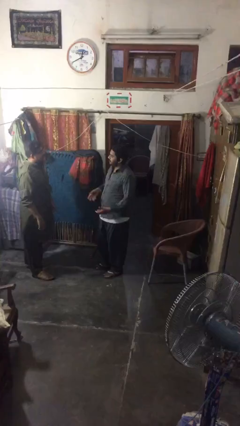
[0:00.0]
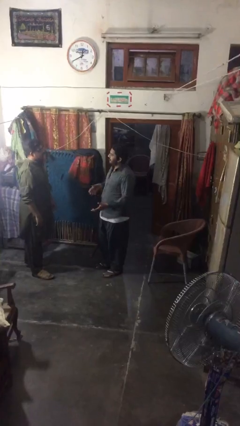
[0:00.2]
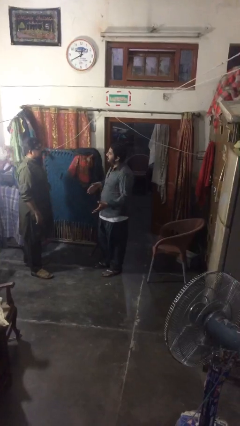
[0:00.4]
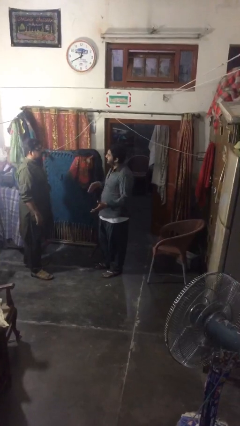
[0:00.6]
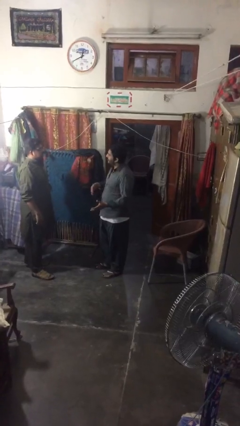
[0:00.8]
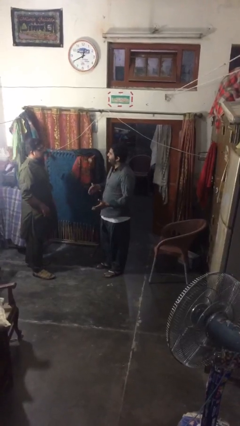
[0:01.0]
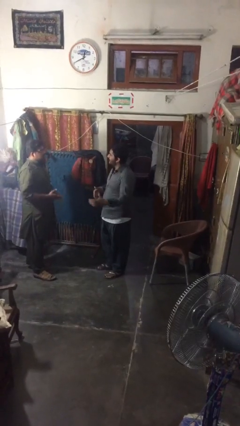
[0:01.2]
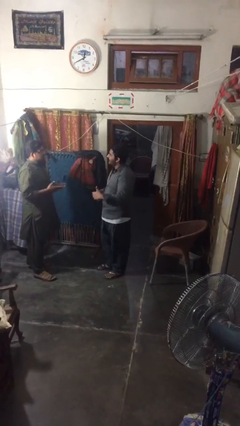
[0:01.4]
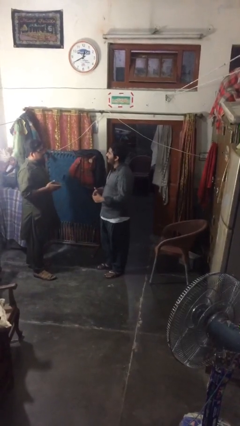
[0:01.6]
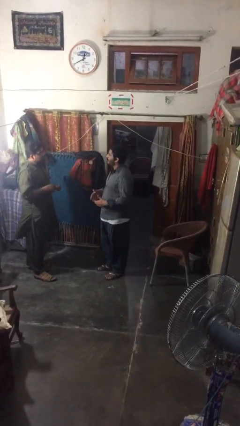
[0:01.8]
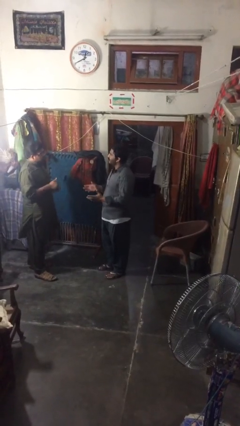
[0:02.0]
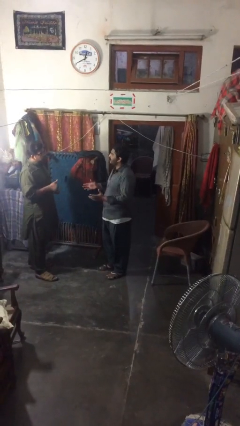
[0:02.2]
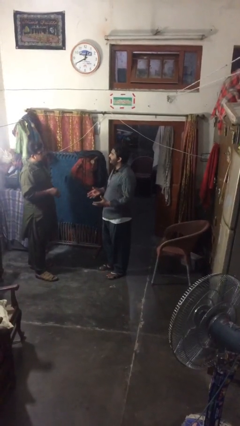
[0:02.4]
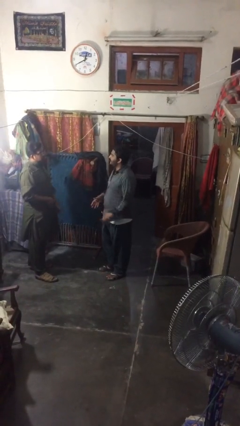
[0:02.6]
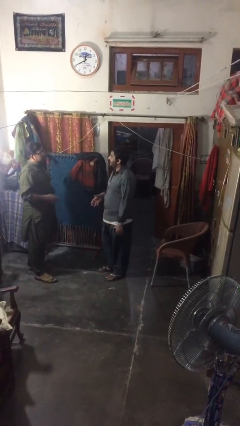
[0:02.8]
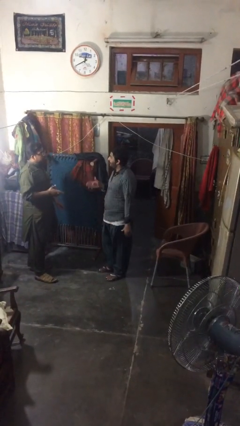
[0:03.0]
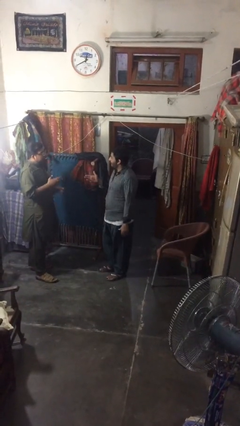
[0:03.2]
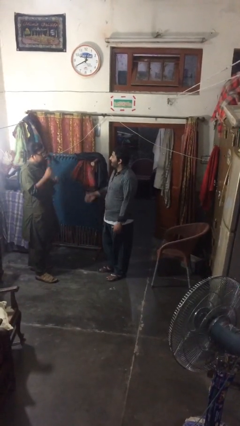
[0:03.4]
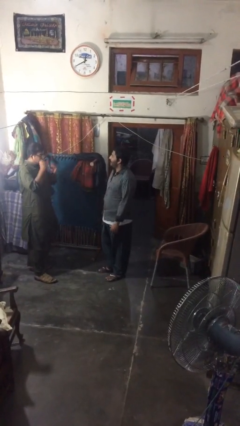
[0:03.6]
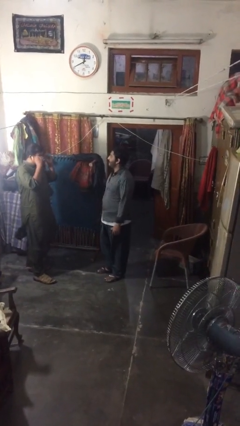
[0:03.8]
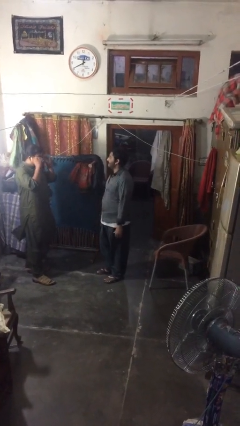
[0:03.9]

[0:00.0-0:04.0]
person talks to person

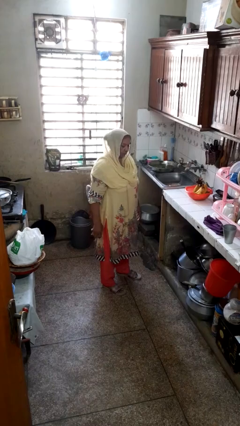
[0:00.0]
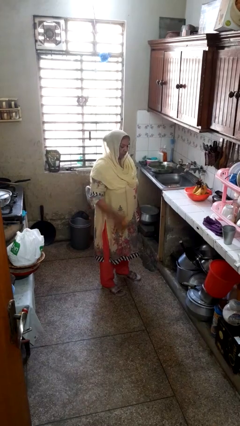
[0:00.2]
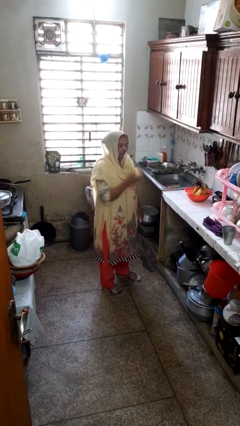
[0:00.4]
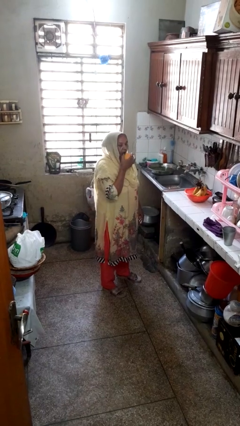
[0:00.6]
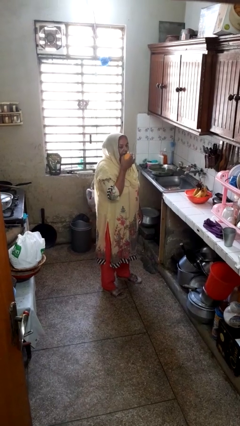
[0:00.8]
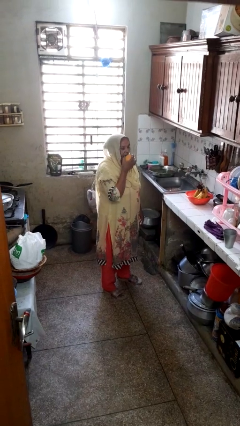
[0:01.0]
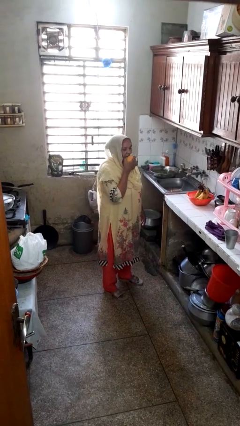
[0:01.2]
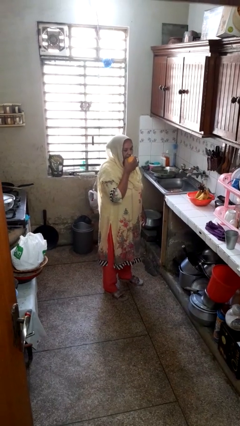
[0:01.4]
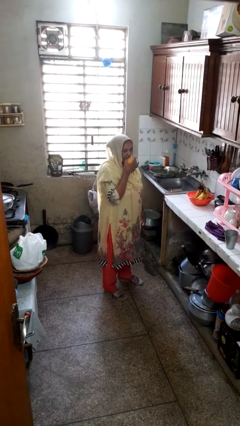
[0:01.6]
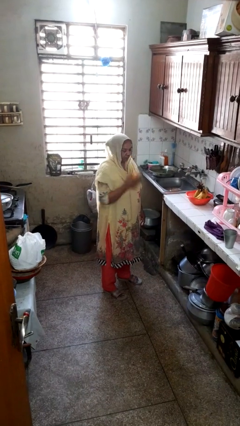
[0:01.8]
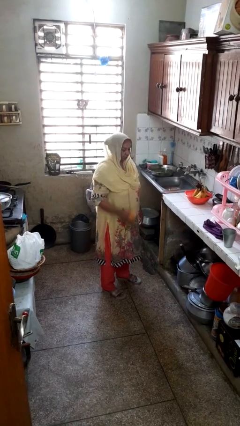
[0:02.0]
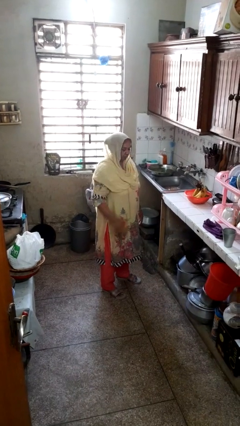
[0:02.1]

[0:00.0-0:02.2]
person eats apple

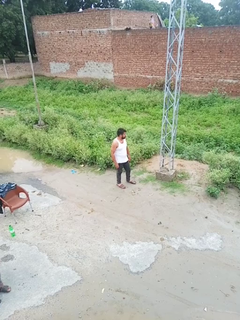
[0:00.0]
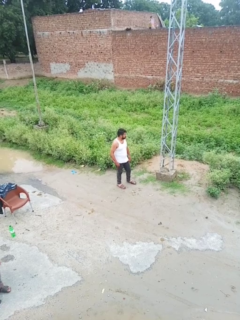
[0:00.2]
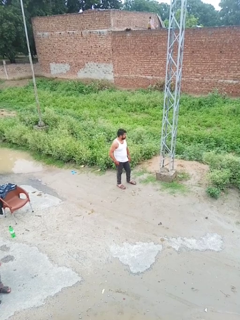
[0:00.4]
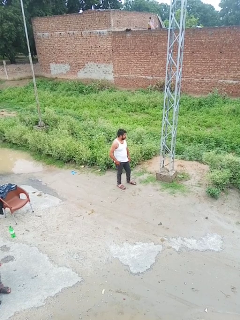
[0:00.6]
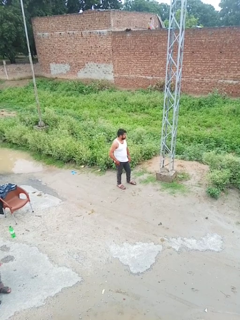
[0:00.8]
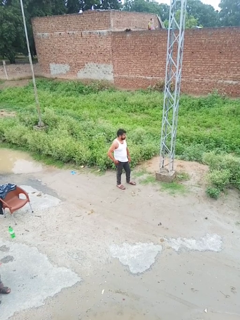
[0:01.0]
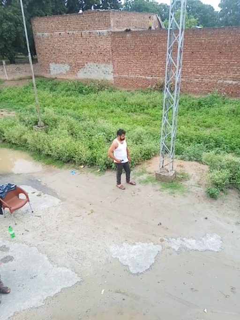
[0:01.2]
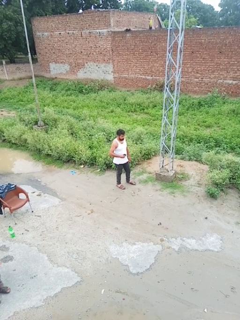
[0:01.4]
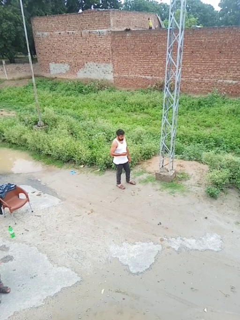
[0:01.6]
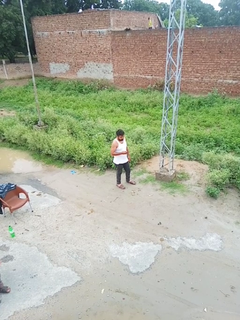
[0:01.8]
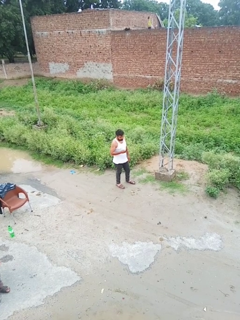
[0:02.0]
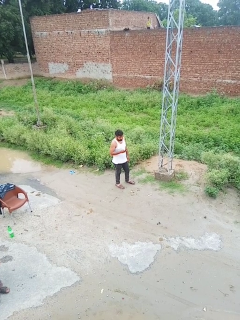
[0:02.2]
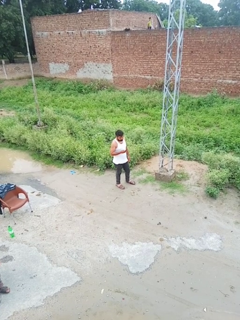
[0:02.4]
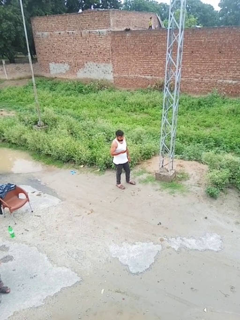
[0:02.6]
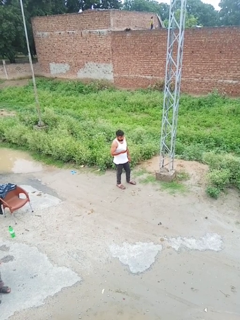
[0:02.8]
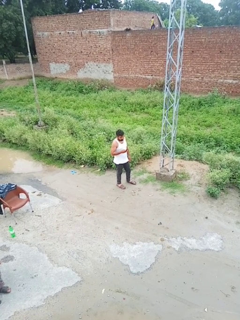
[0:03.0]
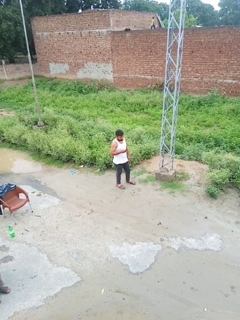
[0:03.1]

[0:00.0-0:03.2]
person takes phone from pocket

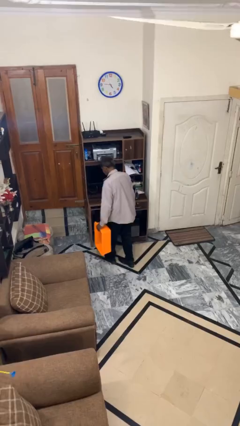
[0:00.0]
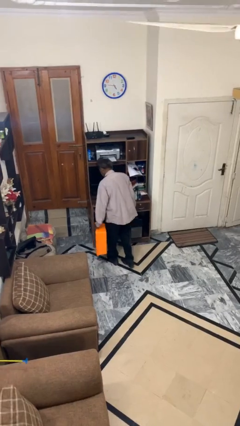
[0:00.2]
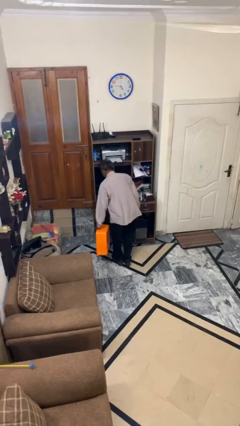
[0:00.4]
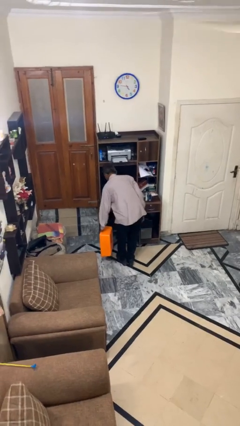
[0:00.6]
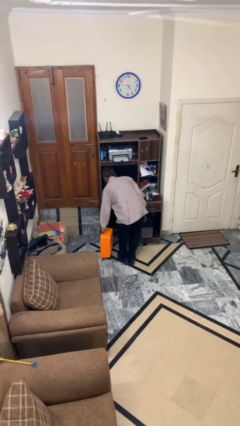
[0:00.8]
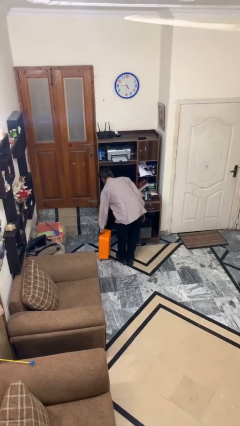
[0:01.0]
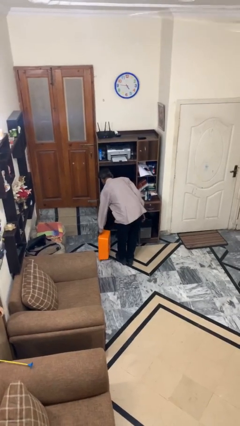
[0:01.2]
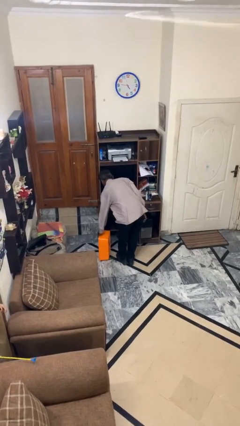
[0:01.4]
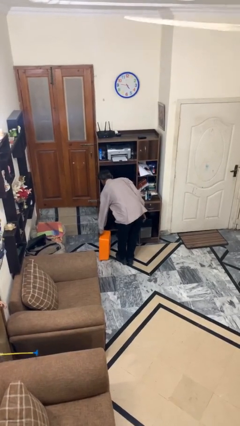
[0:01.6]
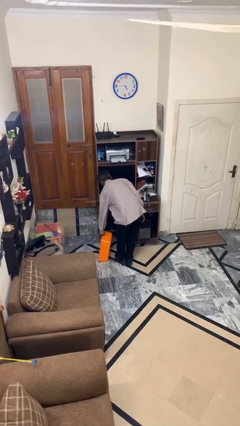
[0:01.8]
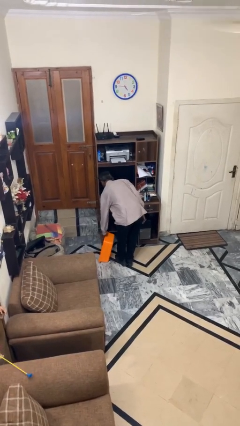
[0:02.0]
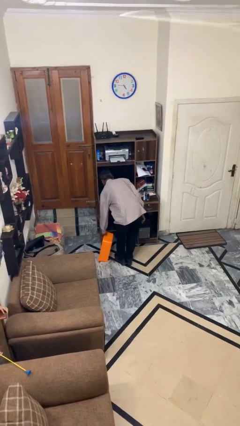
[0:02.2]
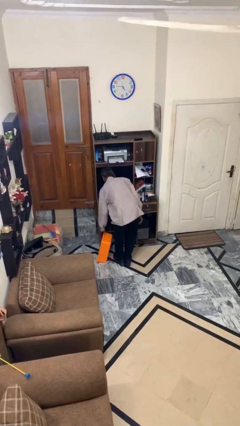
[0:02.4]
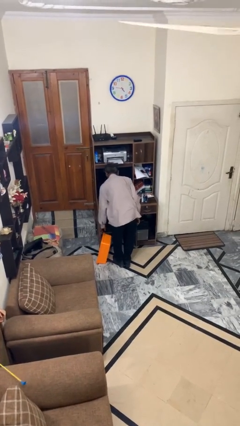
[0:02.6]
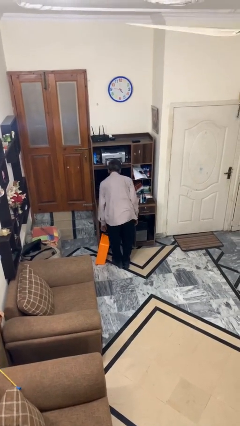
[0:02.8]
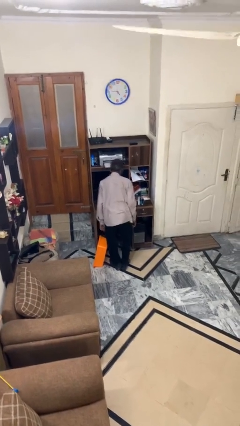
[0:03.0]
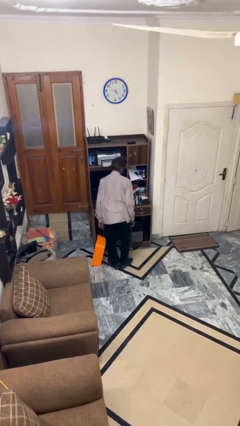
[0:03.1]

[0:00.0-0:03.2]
person puts down object on floor

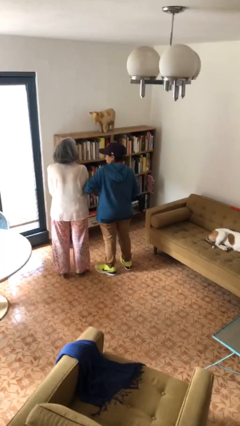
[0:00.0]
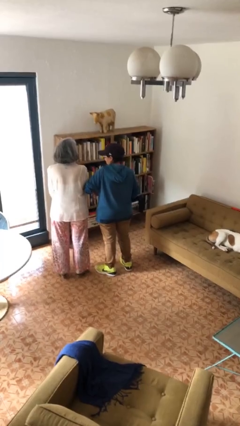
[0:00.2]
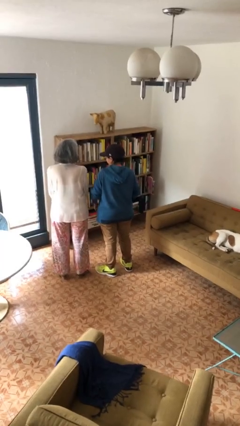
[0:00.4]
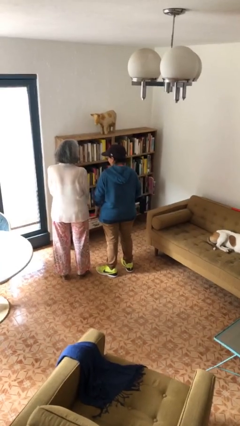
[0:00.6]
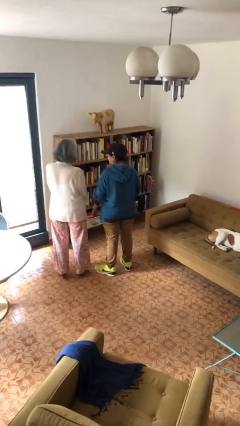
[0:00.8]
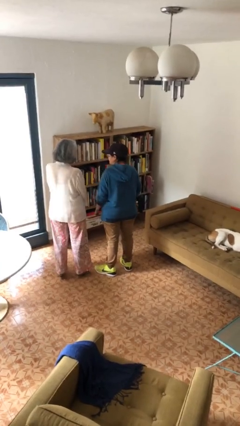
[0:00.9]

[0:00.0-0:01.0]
person nudges person with elbow

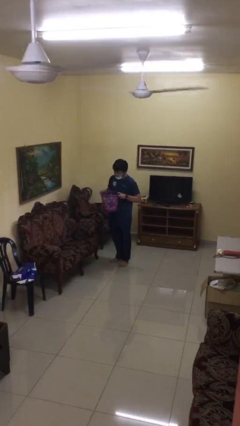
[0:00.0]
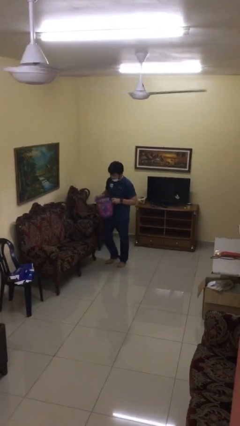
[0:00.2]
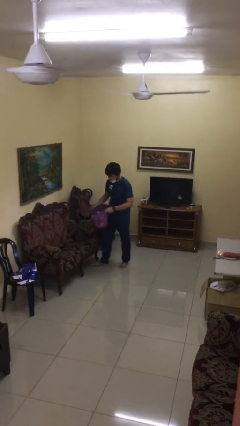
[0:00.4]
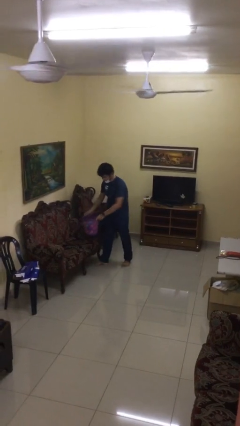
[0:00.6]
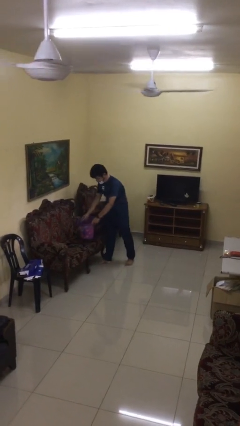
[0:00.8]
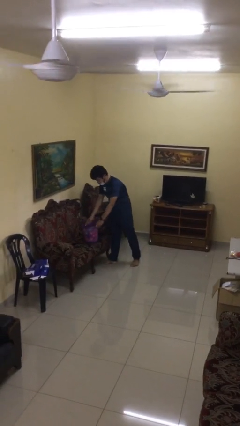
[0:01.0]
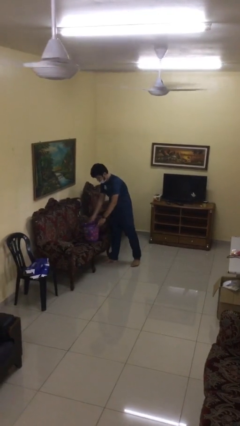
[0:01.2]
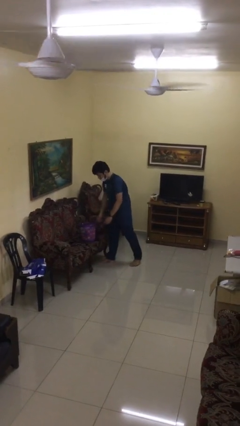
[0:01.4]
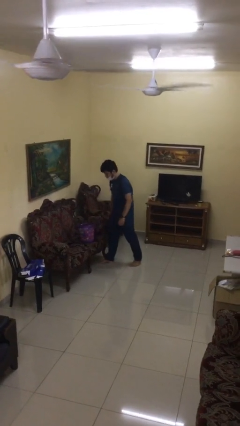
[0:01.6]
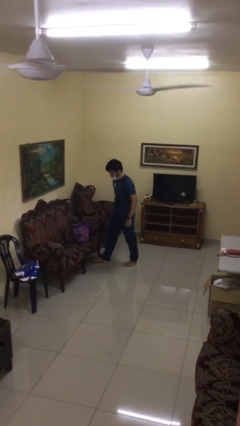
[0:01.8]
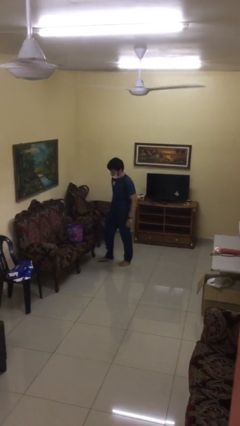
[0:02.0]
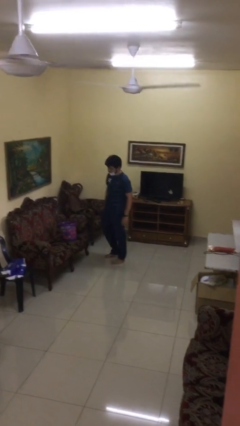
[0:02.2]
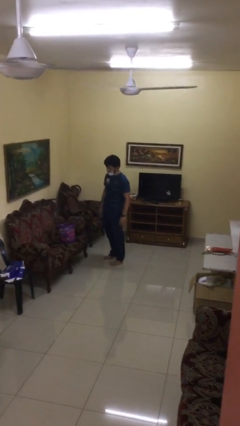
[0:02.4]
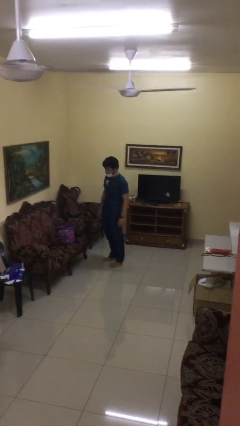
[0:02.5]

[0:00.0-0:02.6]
person puts down object on couch

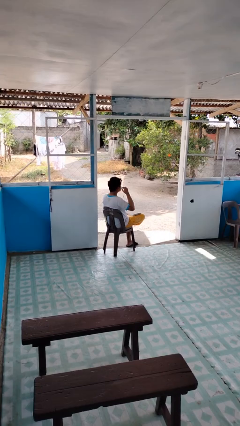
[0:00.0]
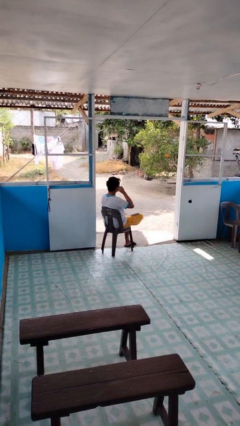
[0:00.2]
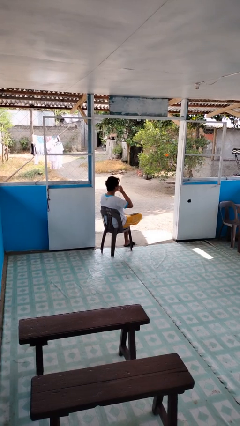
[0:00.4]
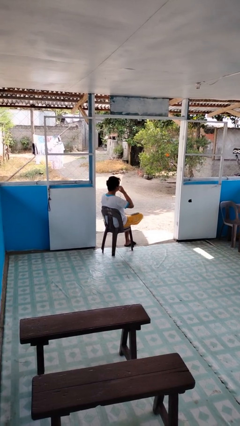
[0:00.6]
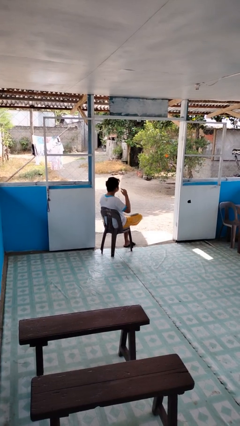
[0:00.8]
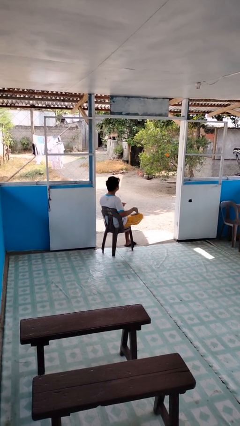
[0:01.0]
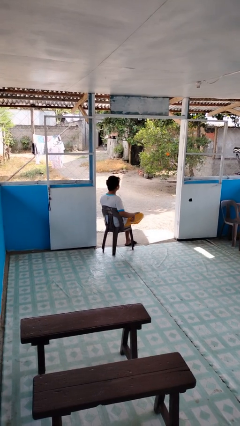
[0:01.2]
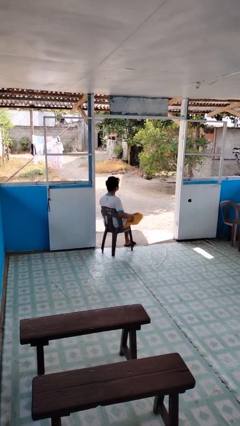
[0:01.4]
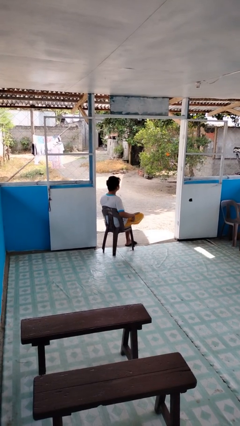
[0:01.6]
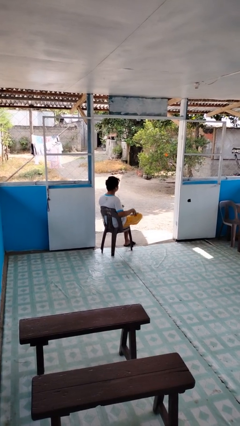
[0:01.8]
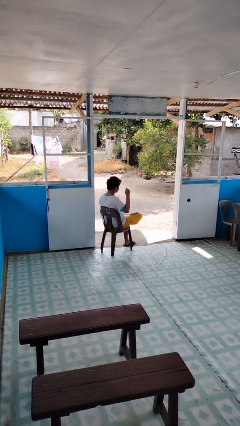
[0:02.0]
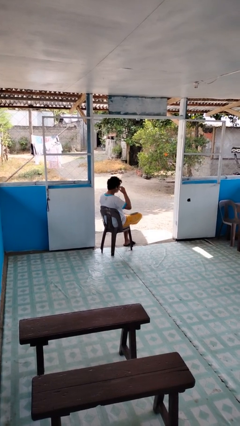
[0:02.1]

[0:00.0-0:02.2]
person puts on headphones
